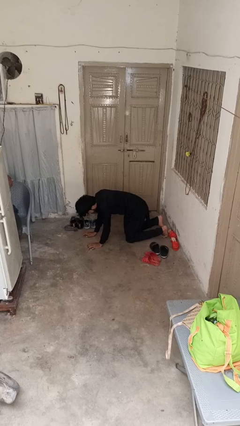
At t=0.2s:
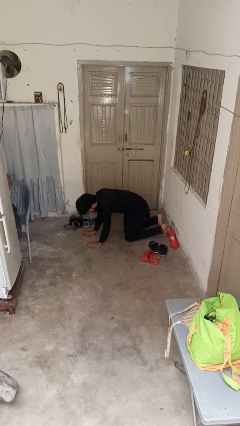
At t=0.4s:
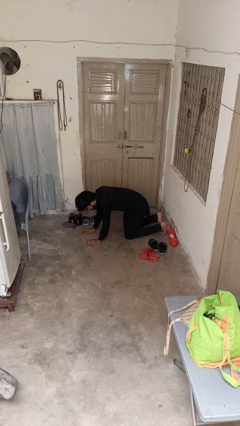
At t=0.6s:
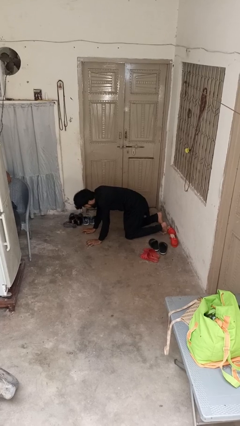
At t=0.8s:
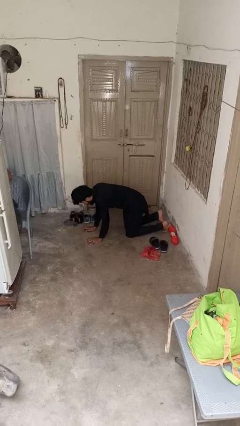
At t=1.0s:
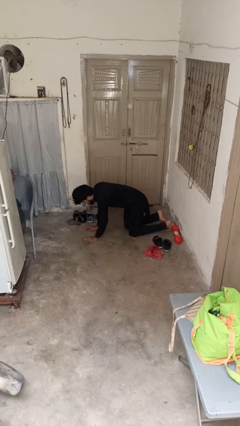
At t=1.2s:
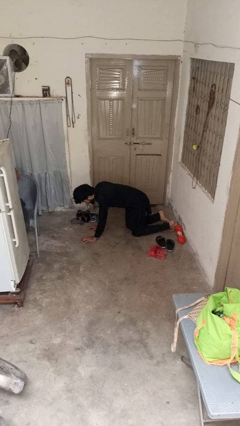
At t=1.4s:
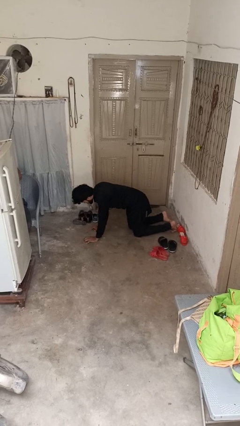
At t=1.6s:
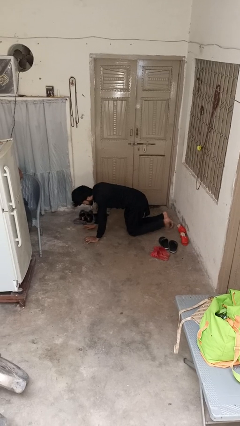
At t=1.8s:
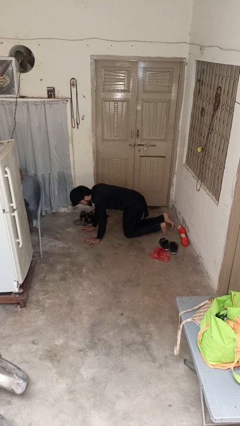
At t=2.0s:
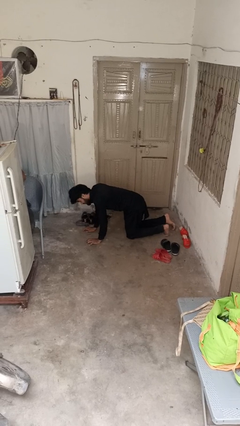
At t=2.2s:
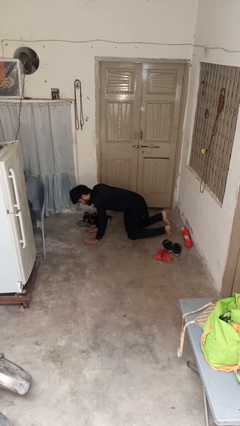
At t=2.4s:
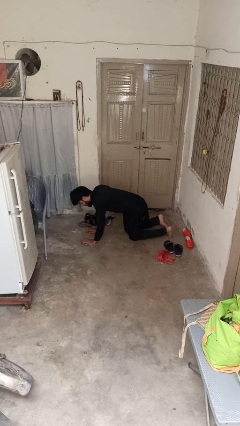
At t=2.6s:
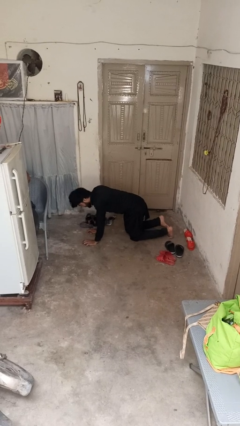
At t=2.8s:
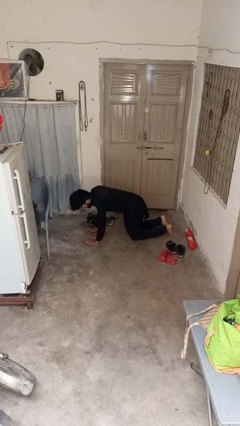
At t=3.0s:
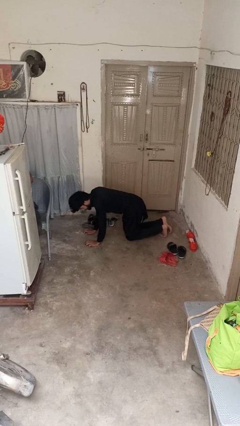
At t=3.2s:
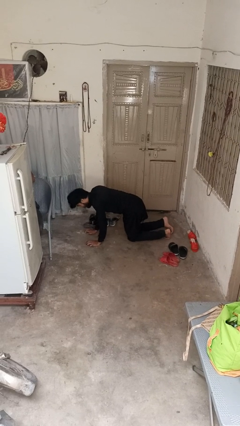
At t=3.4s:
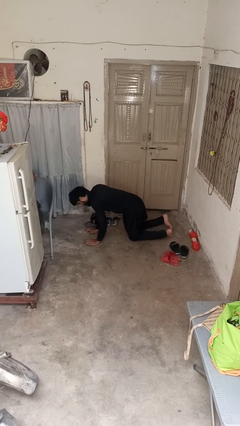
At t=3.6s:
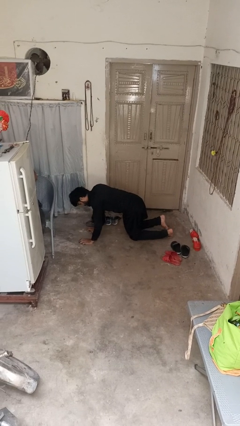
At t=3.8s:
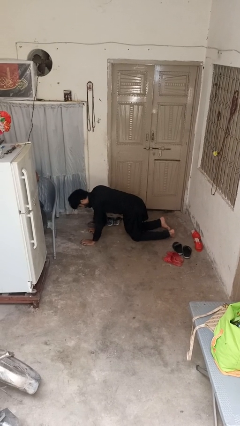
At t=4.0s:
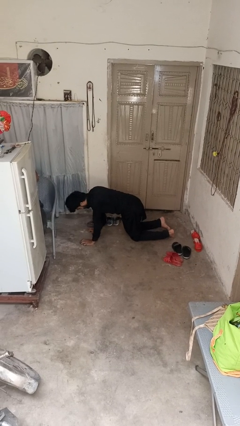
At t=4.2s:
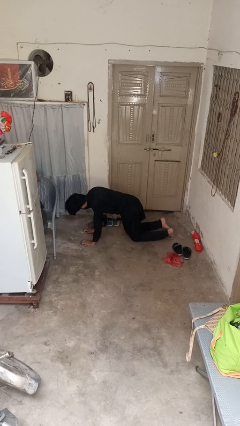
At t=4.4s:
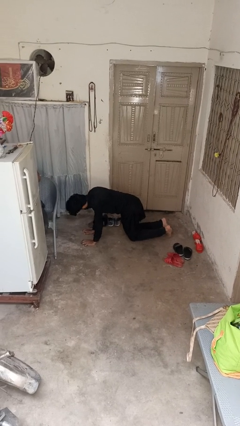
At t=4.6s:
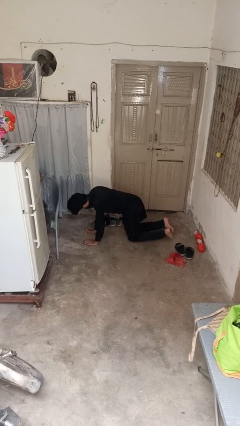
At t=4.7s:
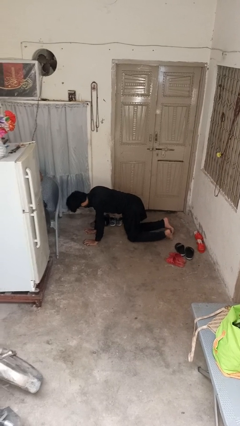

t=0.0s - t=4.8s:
person crawls

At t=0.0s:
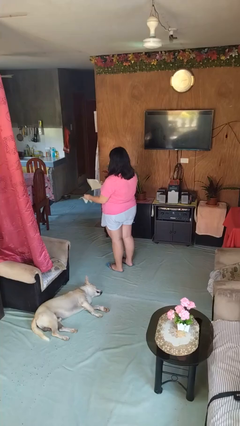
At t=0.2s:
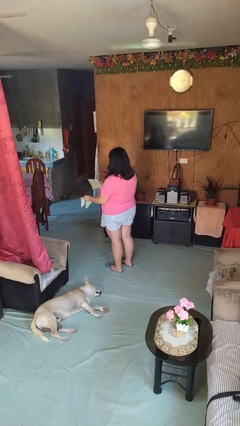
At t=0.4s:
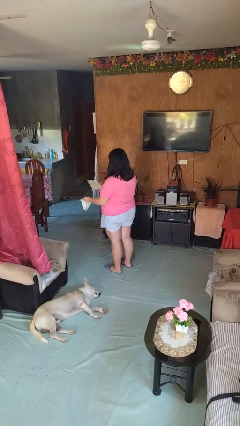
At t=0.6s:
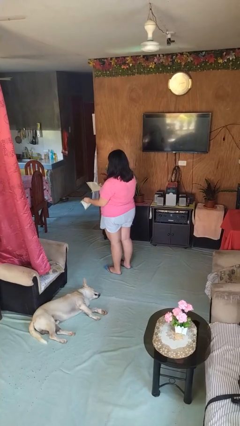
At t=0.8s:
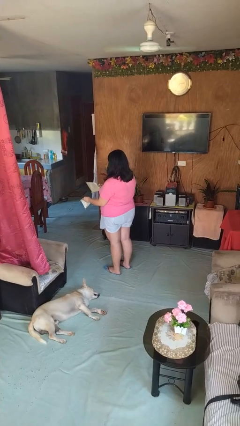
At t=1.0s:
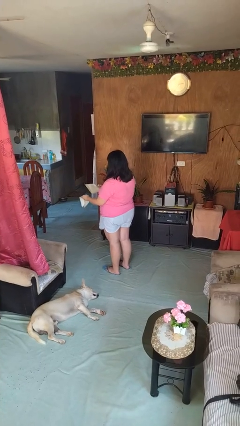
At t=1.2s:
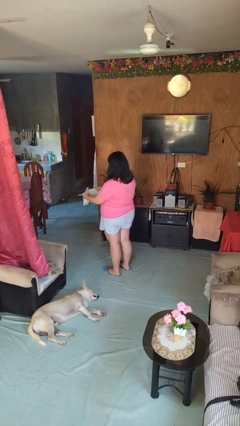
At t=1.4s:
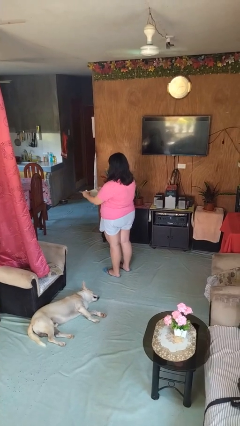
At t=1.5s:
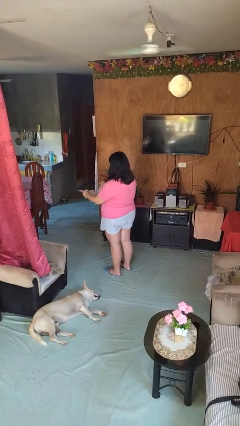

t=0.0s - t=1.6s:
person tears paper

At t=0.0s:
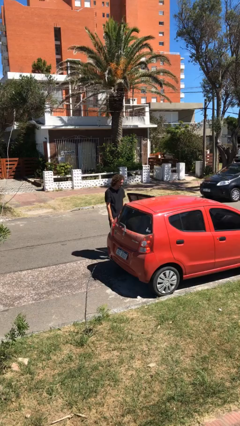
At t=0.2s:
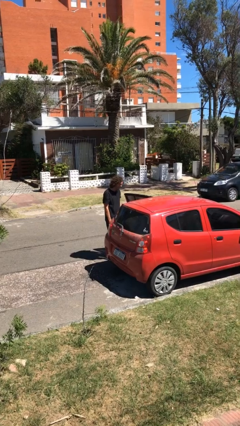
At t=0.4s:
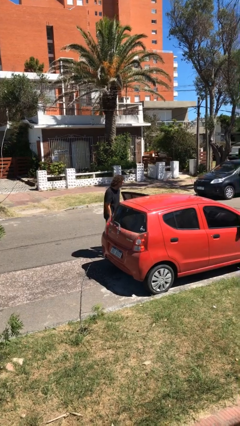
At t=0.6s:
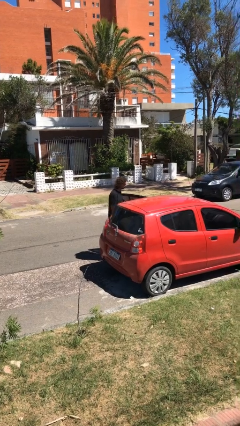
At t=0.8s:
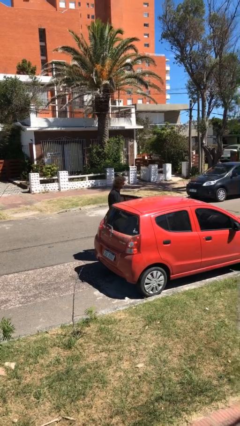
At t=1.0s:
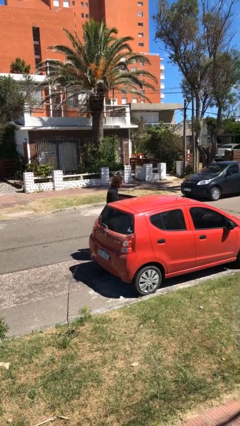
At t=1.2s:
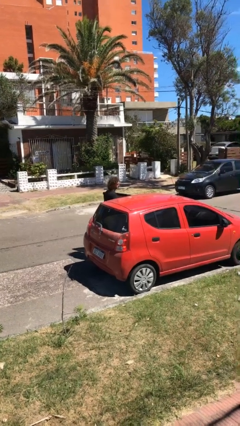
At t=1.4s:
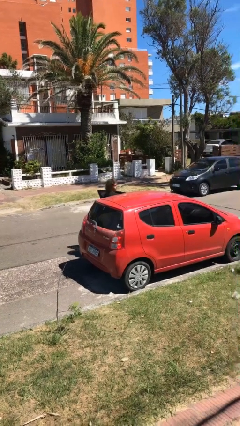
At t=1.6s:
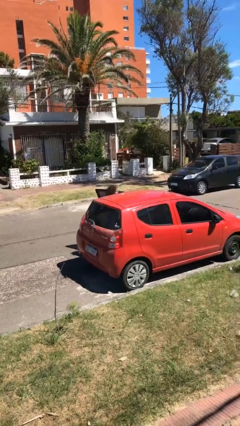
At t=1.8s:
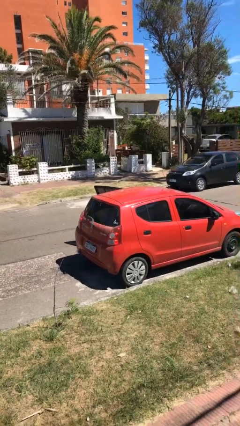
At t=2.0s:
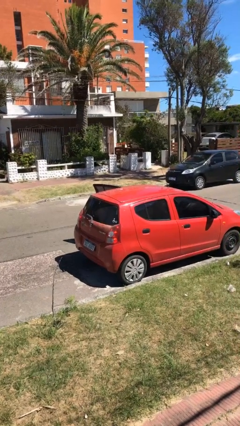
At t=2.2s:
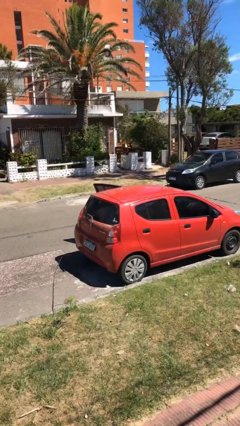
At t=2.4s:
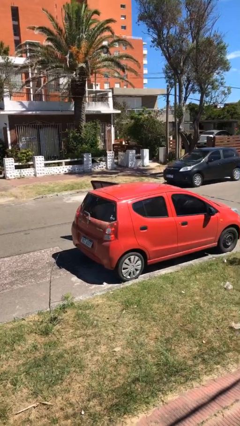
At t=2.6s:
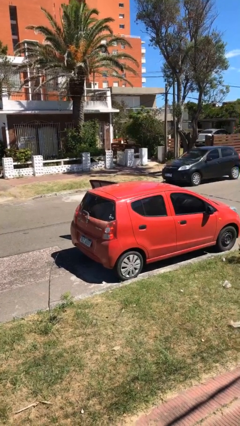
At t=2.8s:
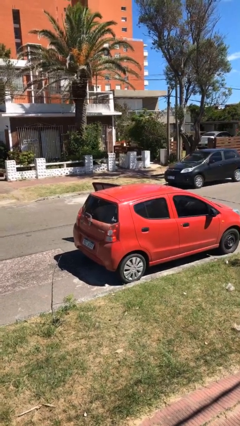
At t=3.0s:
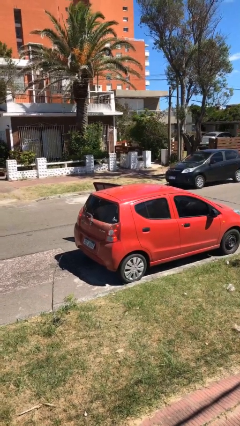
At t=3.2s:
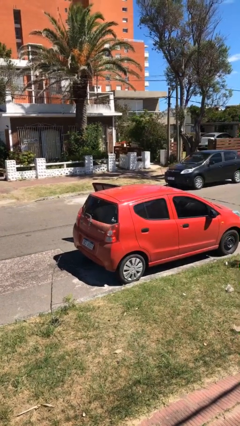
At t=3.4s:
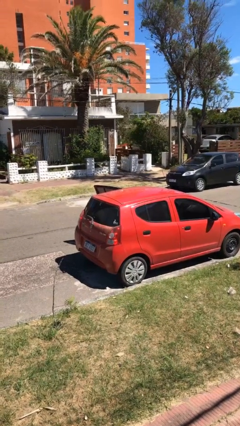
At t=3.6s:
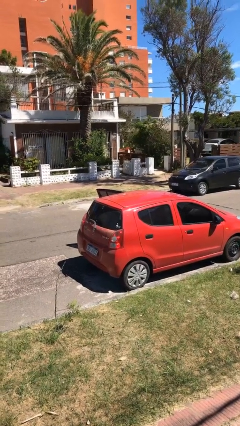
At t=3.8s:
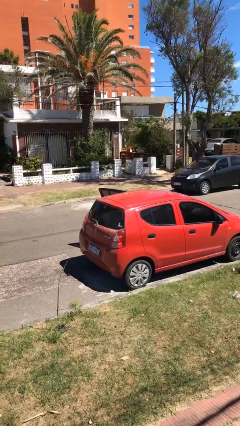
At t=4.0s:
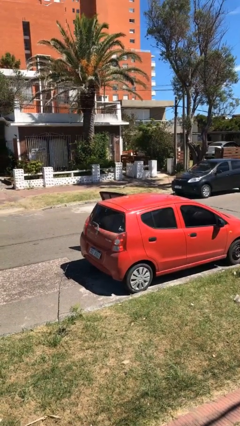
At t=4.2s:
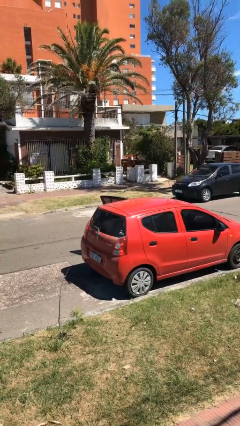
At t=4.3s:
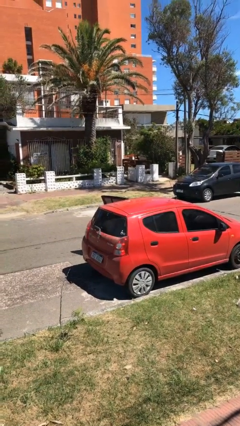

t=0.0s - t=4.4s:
person enters car

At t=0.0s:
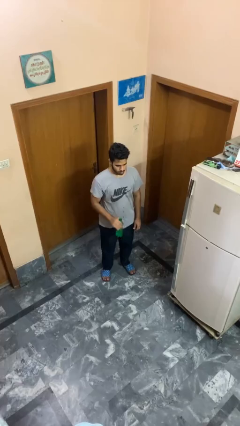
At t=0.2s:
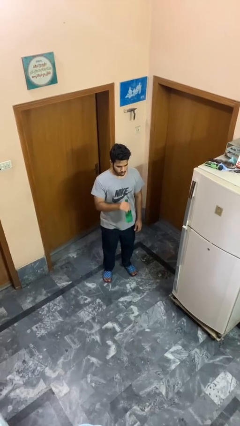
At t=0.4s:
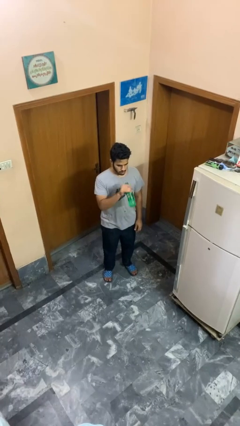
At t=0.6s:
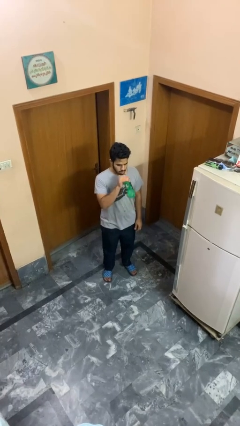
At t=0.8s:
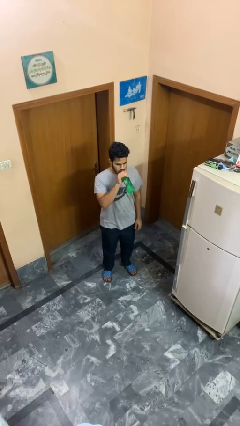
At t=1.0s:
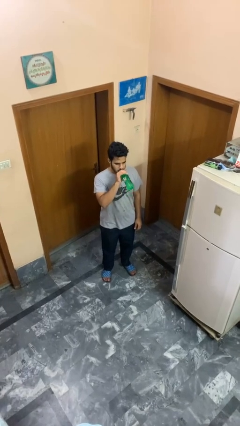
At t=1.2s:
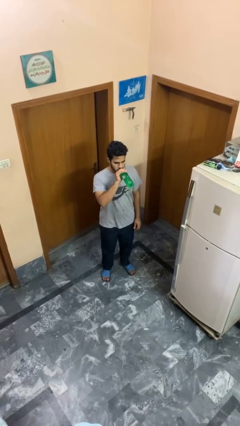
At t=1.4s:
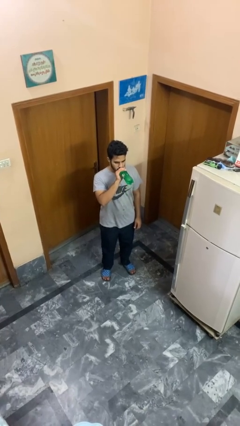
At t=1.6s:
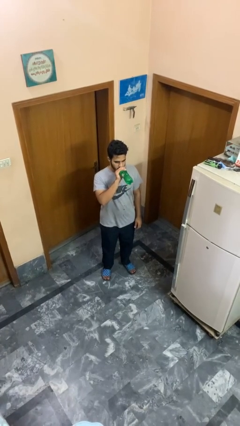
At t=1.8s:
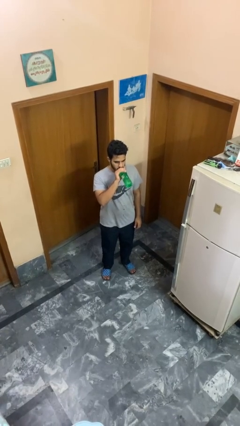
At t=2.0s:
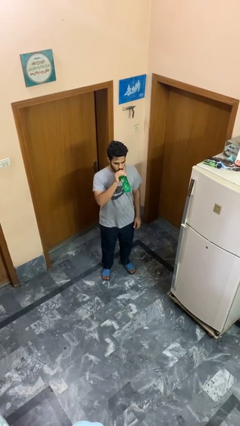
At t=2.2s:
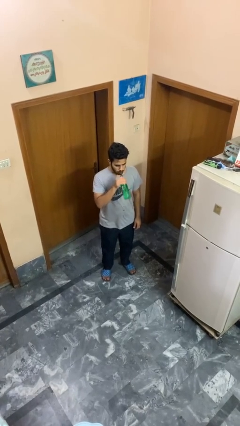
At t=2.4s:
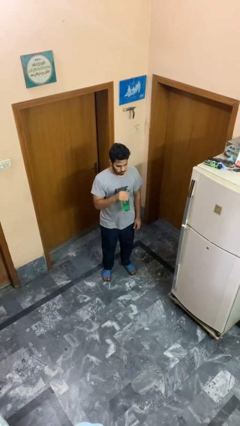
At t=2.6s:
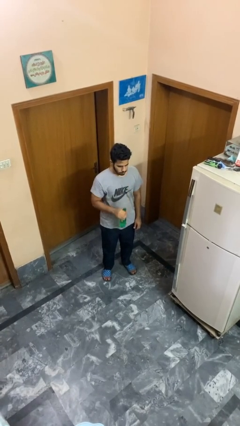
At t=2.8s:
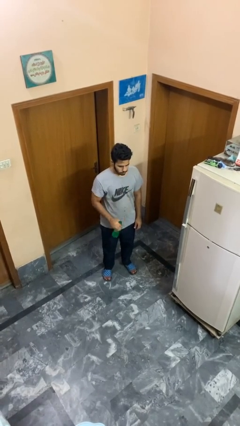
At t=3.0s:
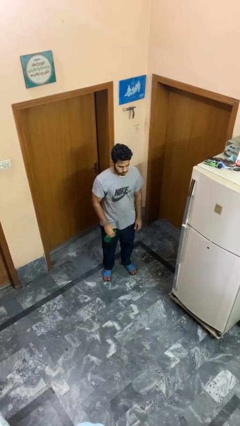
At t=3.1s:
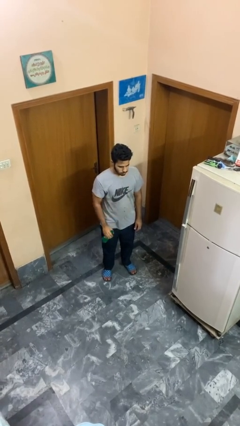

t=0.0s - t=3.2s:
person drinks from bottle

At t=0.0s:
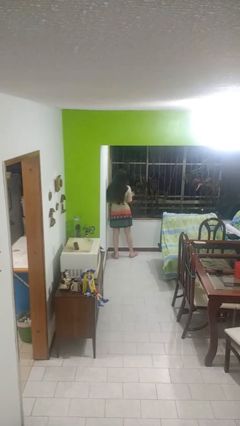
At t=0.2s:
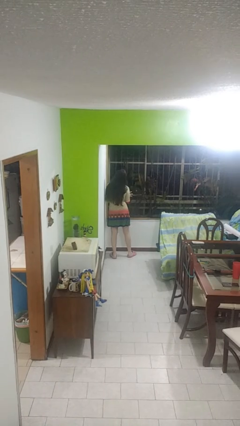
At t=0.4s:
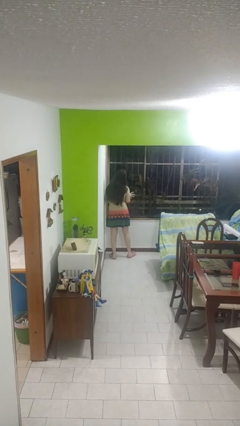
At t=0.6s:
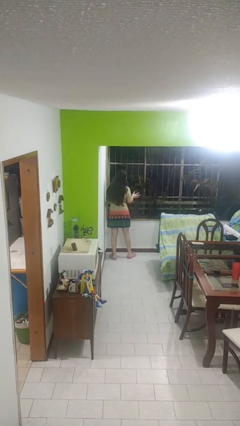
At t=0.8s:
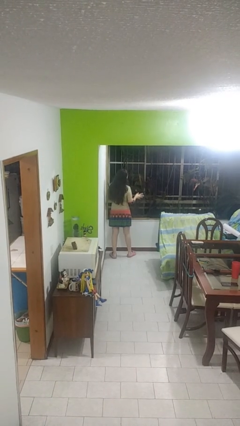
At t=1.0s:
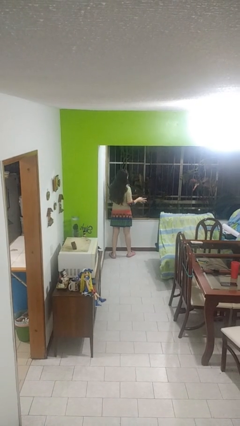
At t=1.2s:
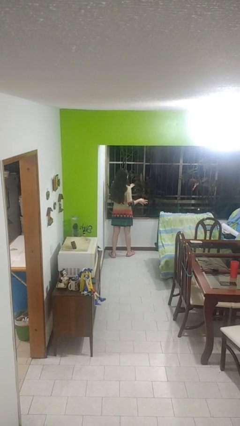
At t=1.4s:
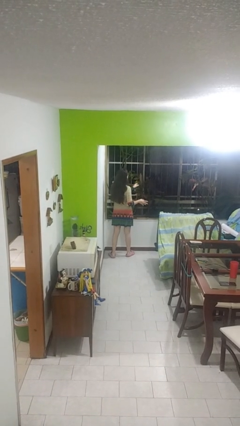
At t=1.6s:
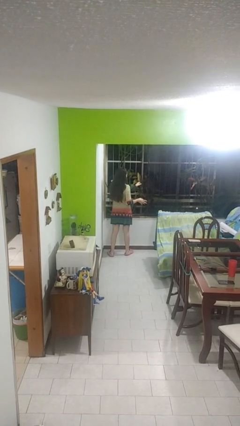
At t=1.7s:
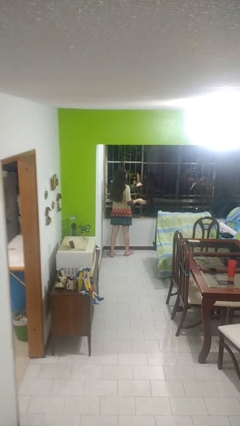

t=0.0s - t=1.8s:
person opens home window

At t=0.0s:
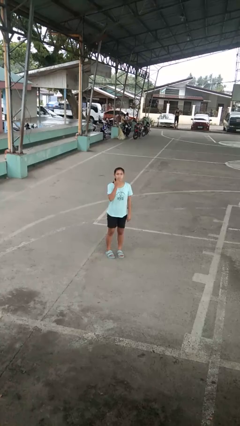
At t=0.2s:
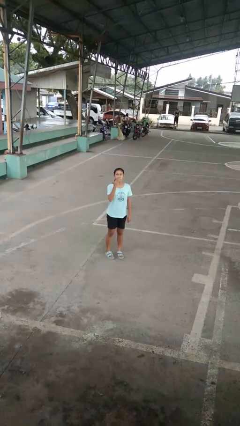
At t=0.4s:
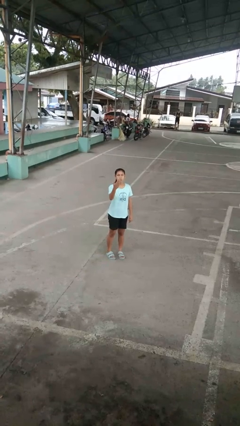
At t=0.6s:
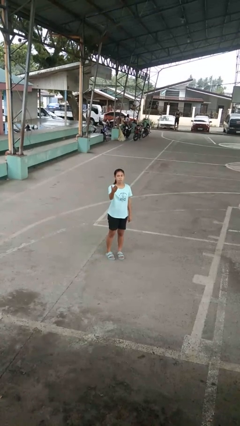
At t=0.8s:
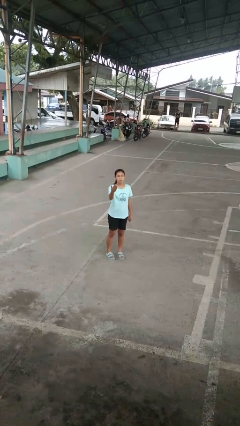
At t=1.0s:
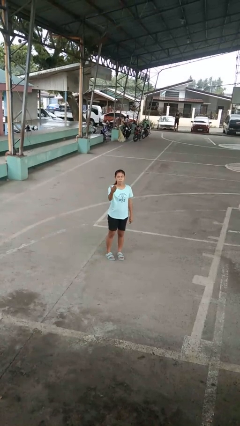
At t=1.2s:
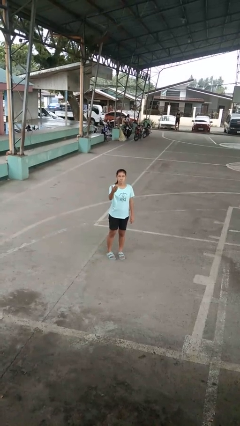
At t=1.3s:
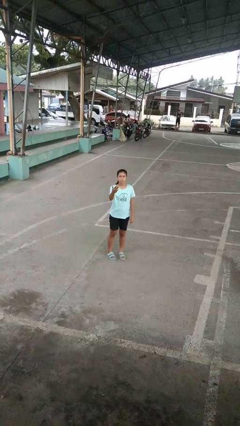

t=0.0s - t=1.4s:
person gestures blow kiss

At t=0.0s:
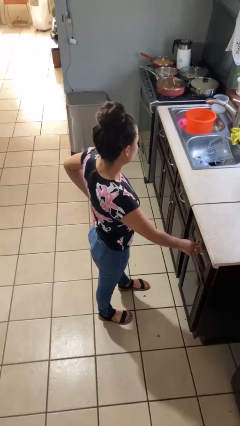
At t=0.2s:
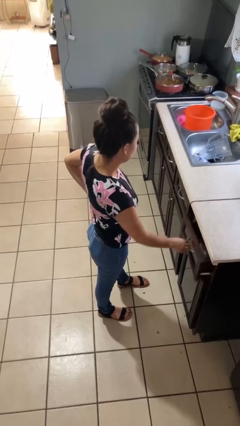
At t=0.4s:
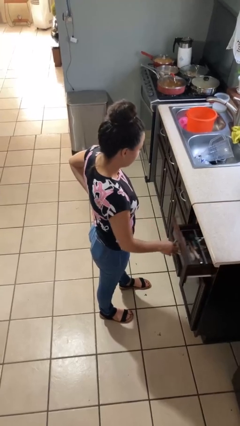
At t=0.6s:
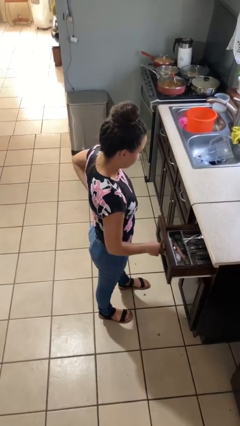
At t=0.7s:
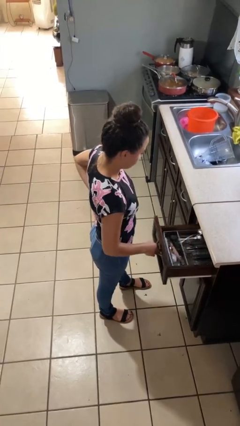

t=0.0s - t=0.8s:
person opens kitchen drawer
